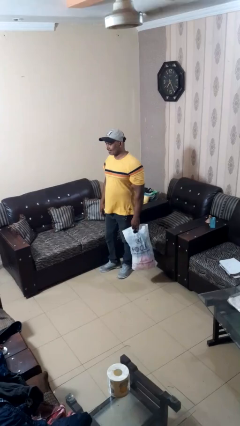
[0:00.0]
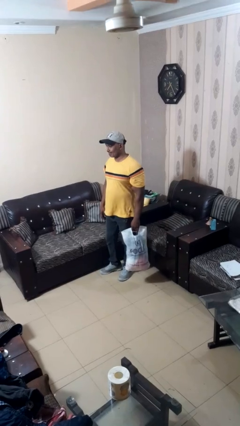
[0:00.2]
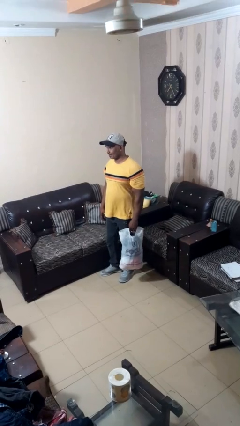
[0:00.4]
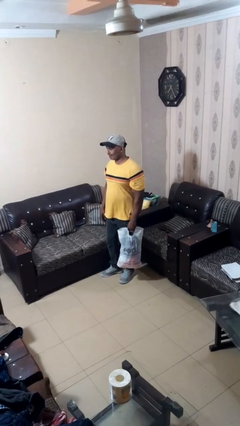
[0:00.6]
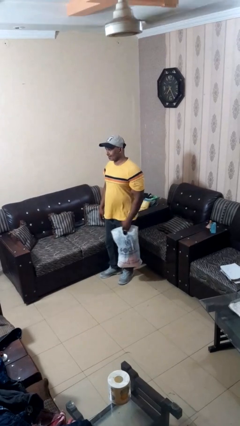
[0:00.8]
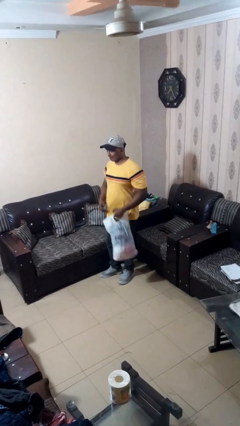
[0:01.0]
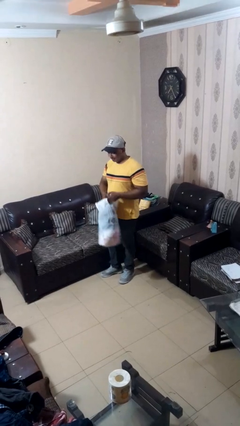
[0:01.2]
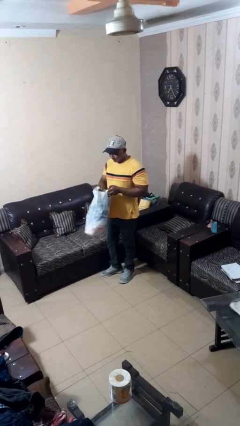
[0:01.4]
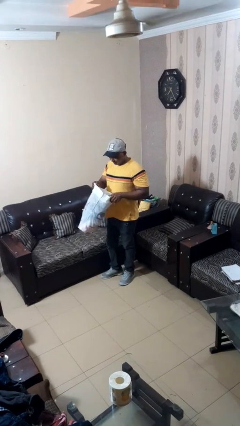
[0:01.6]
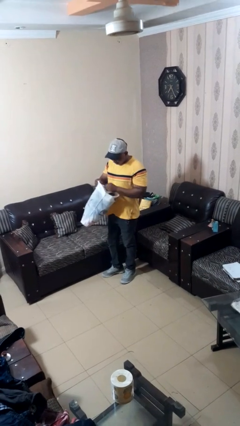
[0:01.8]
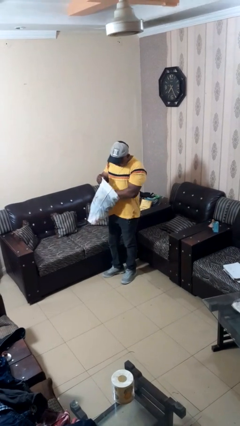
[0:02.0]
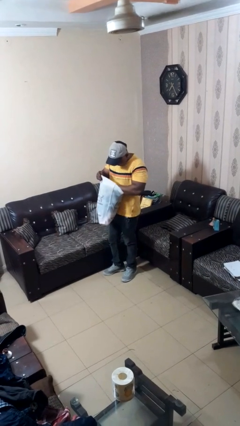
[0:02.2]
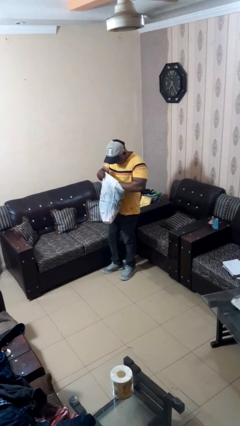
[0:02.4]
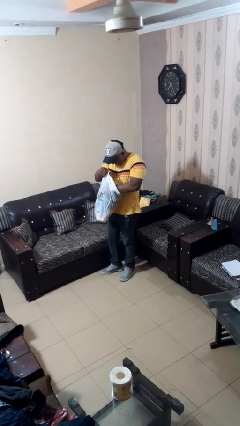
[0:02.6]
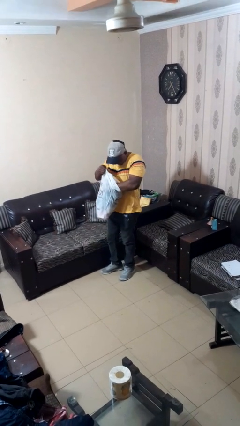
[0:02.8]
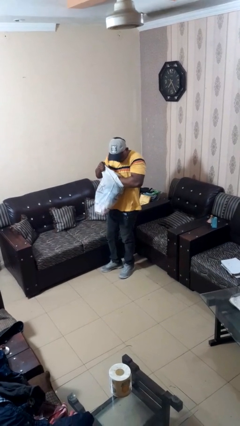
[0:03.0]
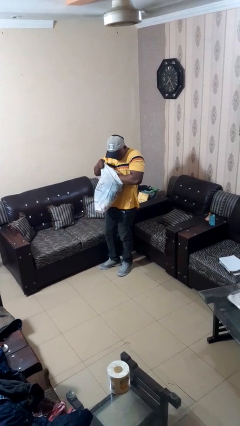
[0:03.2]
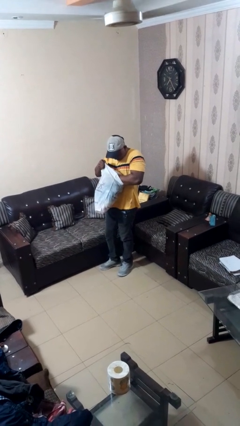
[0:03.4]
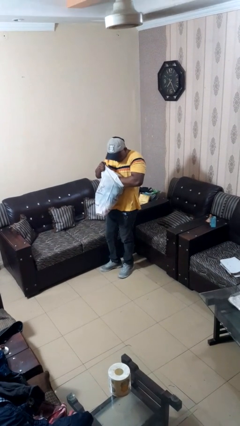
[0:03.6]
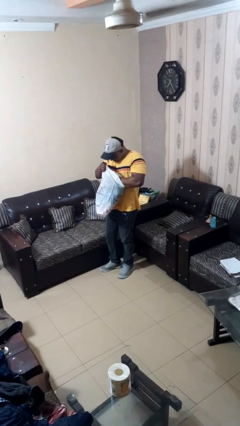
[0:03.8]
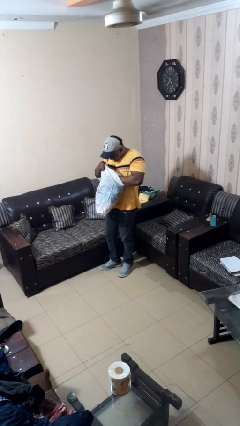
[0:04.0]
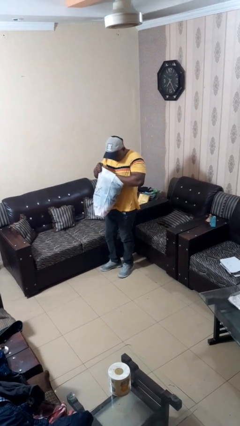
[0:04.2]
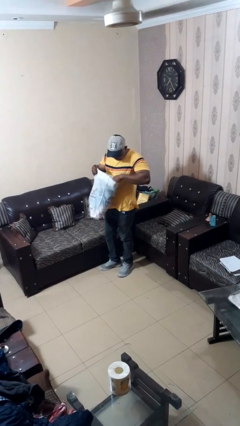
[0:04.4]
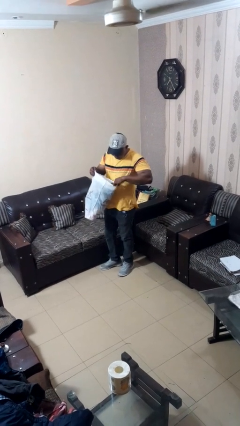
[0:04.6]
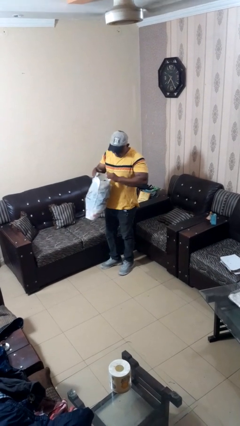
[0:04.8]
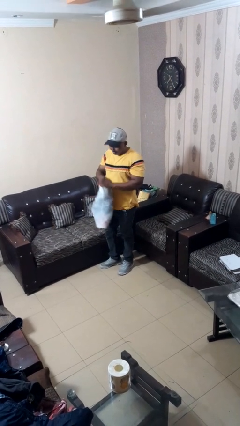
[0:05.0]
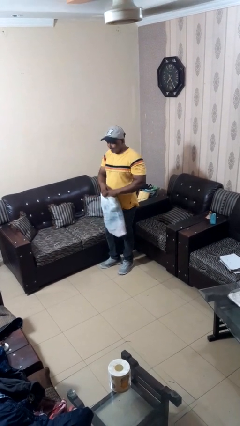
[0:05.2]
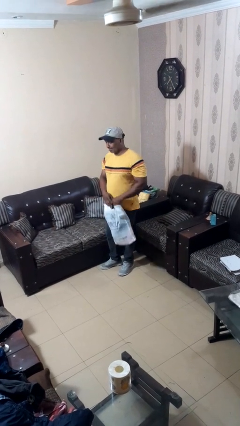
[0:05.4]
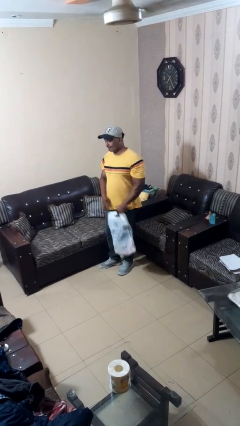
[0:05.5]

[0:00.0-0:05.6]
person searches in bag

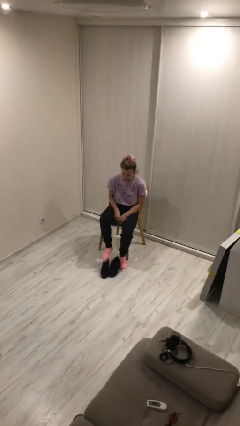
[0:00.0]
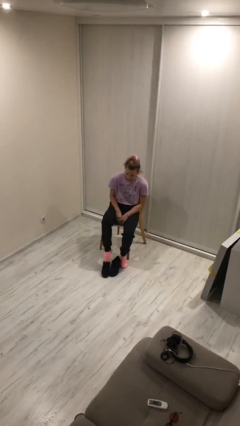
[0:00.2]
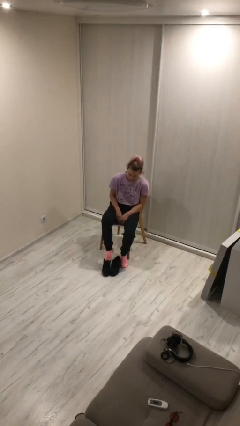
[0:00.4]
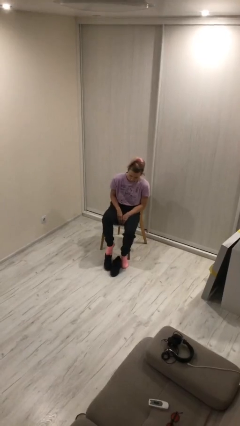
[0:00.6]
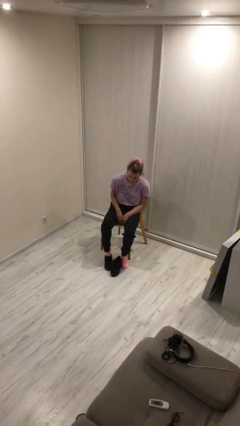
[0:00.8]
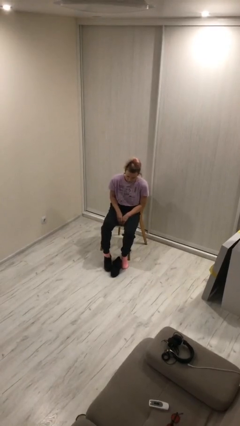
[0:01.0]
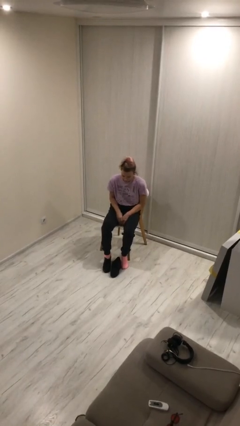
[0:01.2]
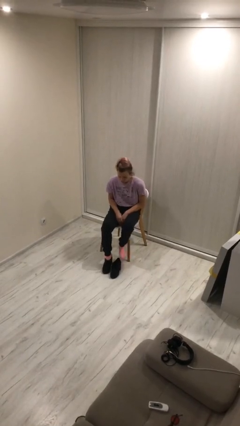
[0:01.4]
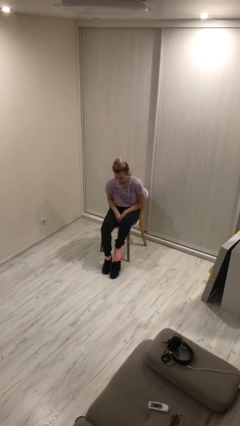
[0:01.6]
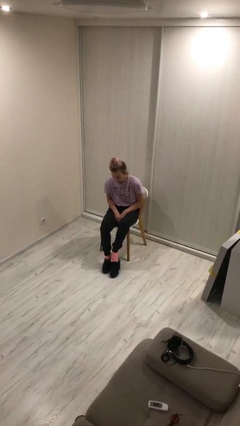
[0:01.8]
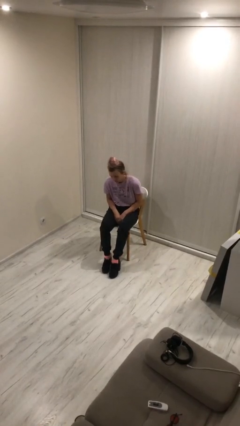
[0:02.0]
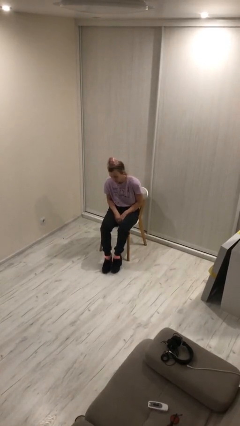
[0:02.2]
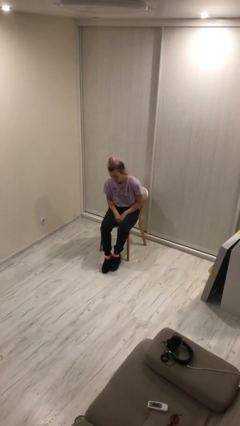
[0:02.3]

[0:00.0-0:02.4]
person puts on shoes

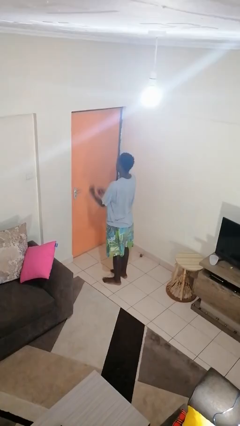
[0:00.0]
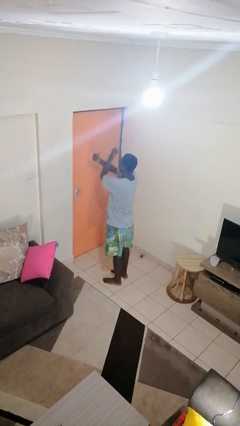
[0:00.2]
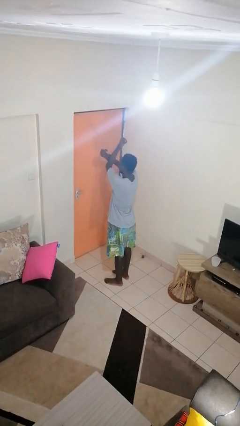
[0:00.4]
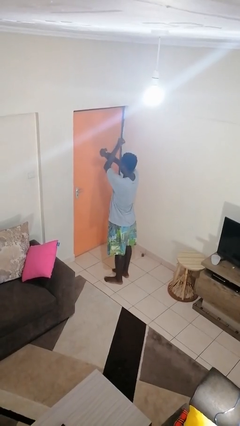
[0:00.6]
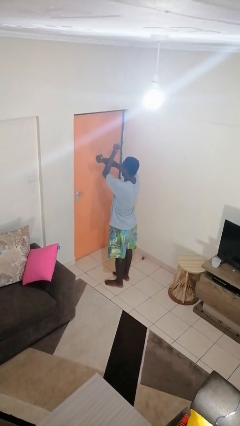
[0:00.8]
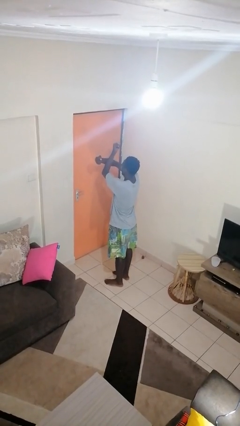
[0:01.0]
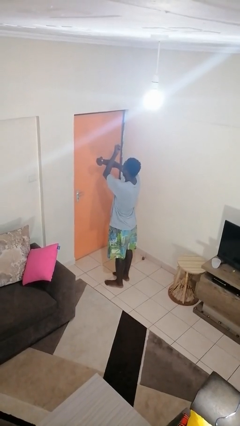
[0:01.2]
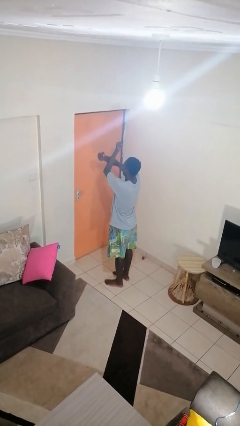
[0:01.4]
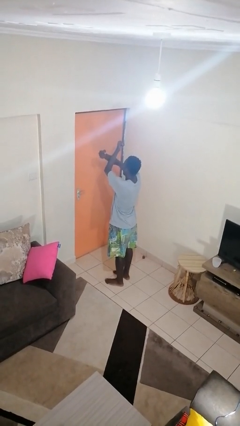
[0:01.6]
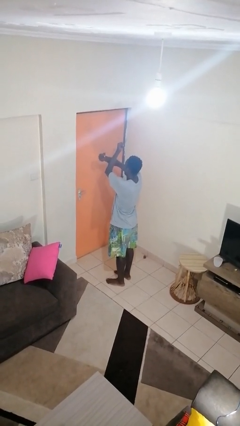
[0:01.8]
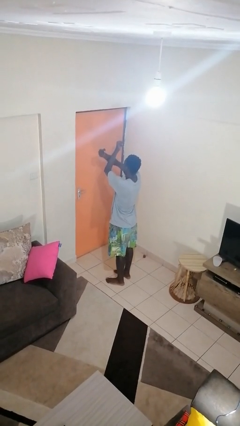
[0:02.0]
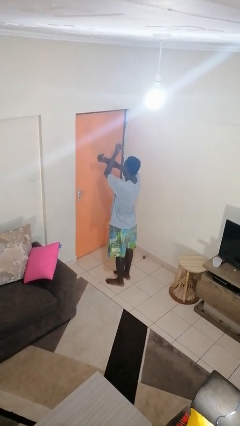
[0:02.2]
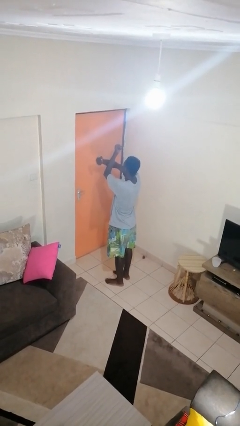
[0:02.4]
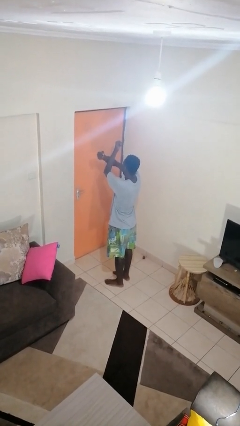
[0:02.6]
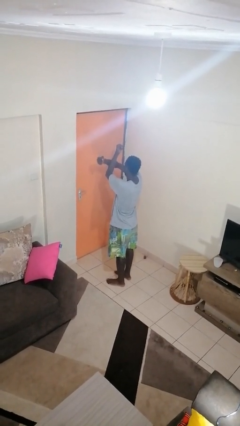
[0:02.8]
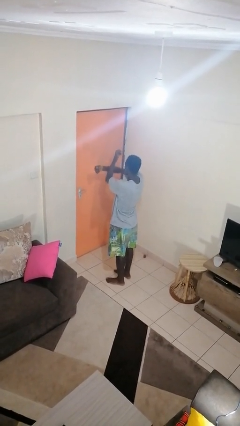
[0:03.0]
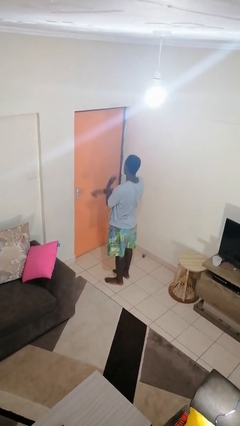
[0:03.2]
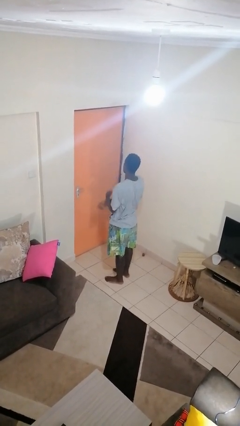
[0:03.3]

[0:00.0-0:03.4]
person gestures arms x

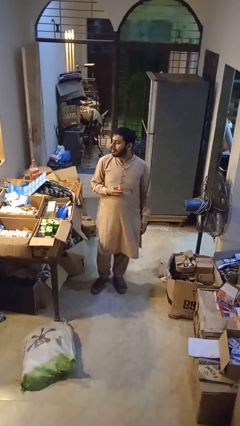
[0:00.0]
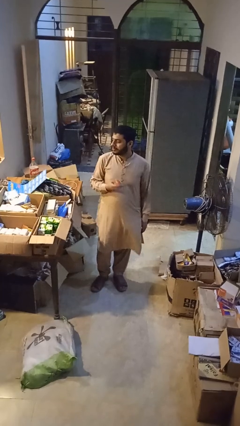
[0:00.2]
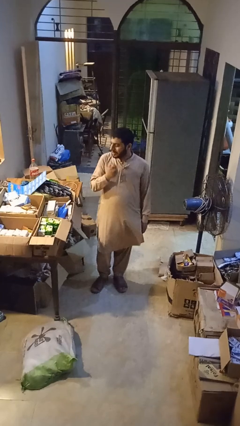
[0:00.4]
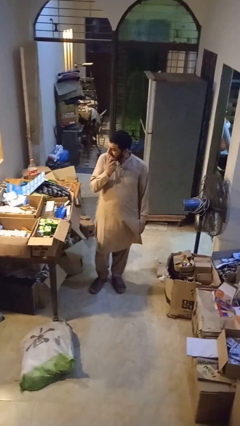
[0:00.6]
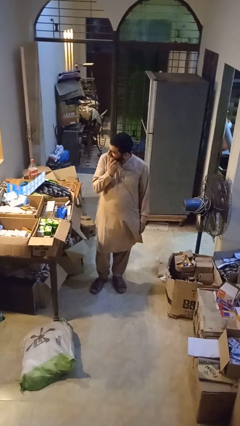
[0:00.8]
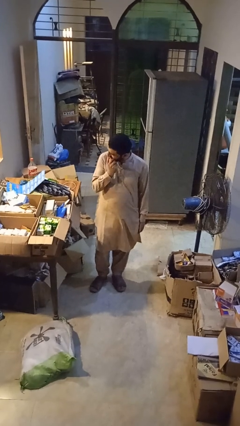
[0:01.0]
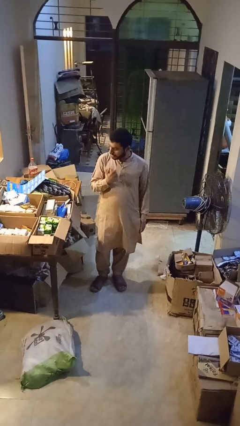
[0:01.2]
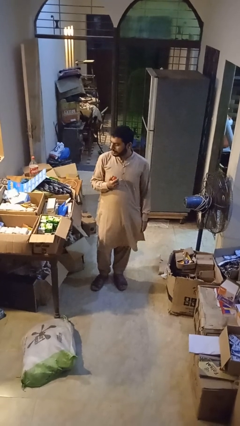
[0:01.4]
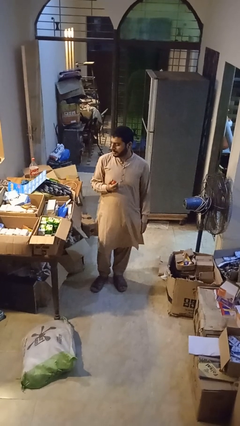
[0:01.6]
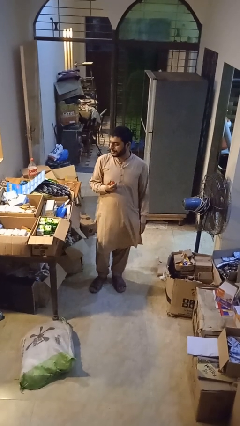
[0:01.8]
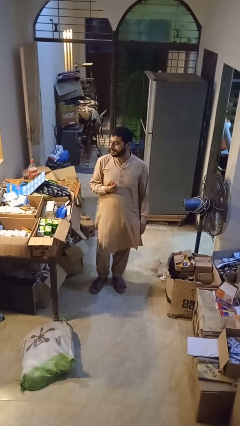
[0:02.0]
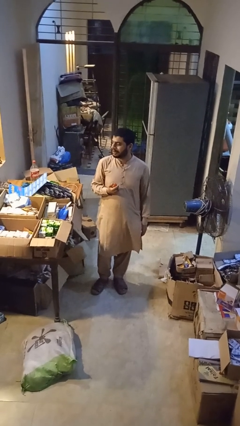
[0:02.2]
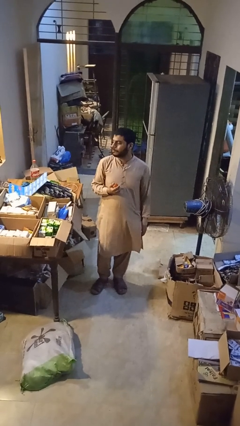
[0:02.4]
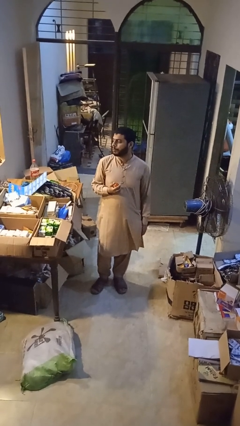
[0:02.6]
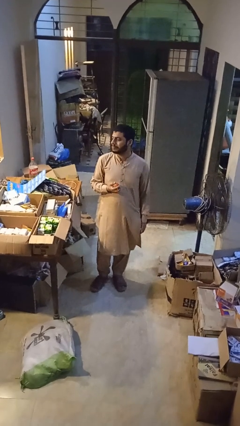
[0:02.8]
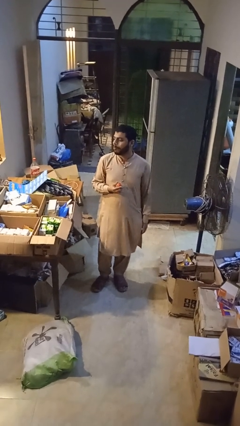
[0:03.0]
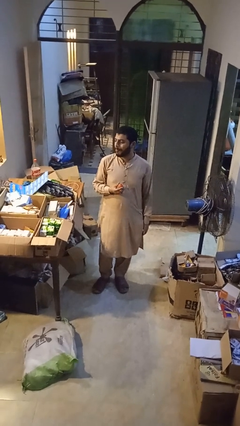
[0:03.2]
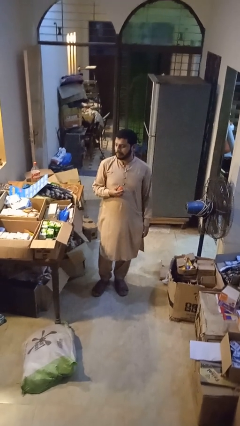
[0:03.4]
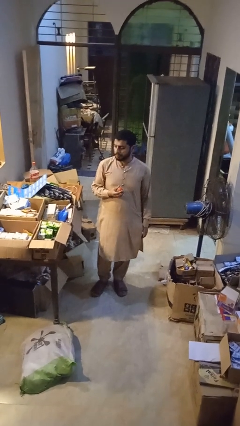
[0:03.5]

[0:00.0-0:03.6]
person eats apple

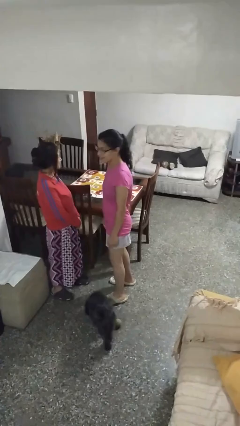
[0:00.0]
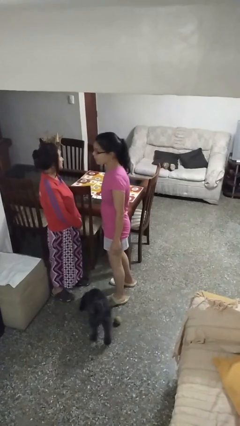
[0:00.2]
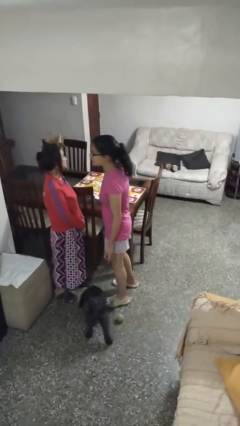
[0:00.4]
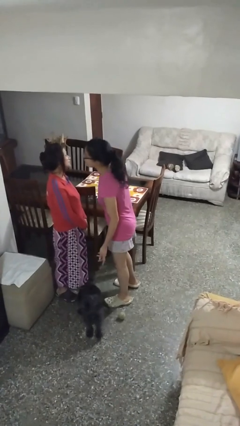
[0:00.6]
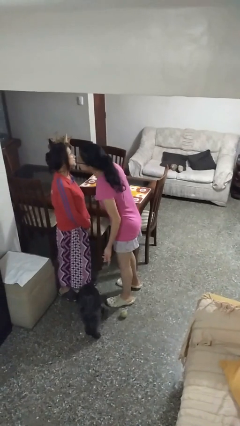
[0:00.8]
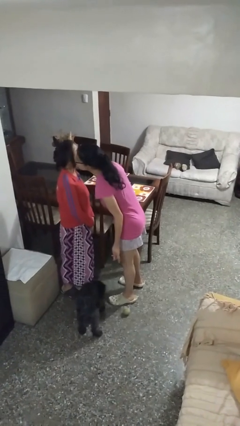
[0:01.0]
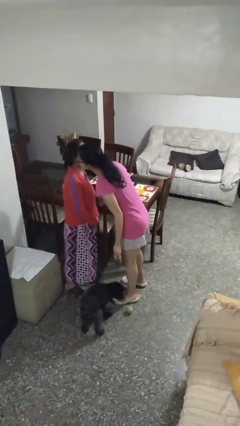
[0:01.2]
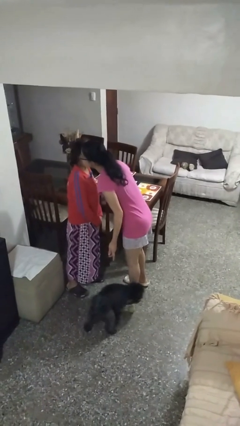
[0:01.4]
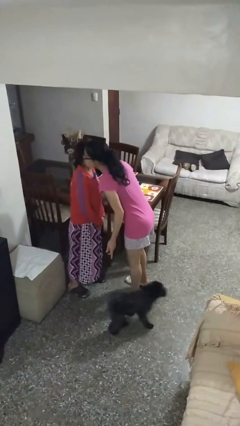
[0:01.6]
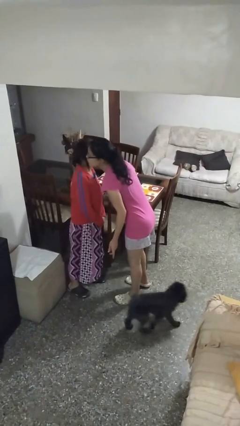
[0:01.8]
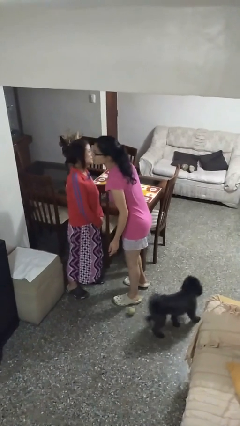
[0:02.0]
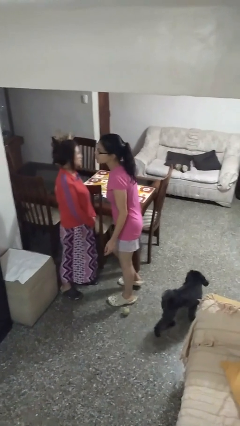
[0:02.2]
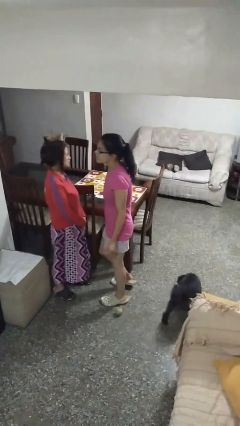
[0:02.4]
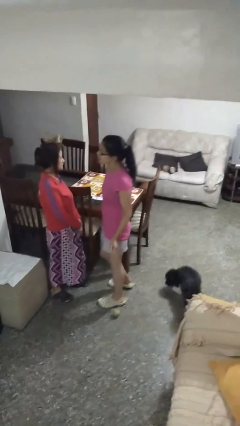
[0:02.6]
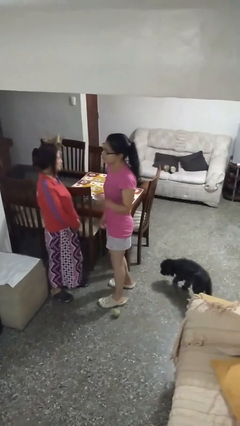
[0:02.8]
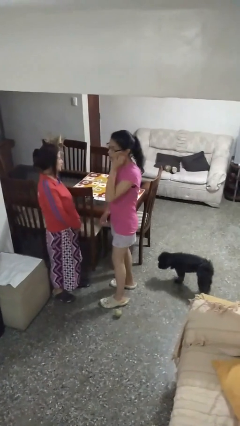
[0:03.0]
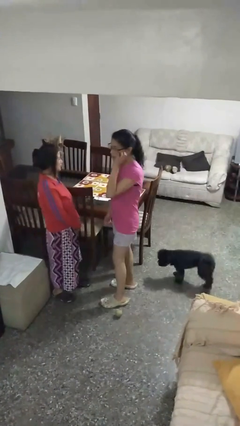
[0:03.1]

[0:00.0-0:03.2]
person kisses cheek of person
